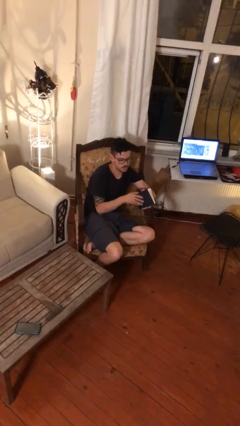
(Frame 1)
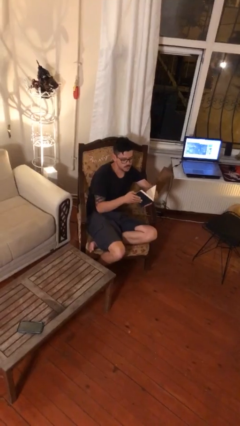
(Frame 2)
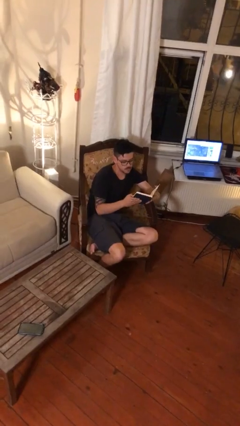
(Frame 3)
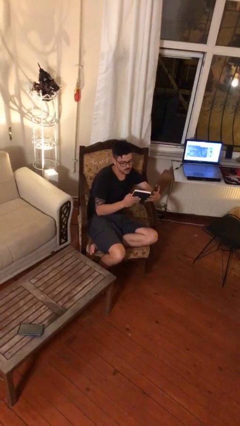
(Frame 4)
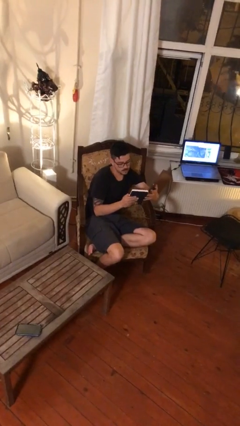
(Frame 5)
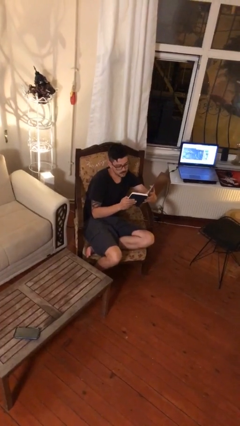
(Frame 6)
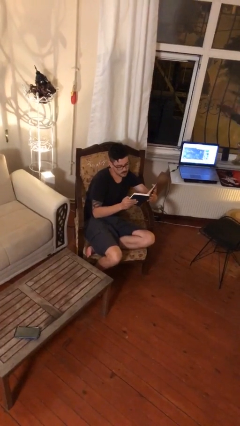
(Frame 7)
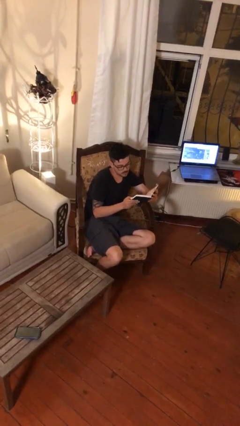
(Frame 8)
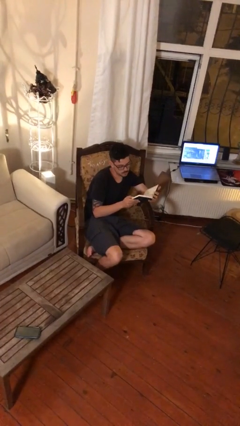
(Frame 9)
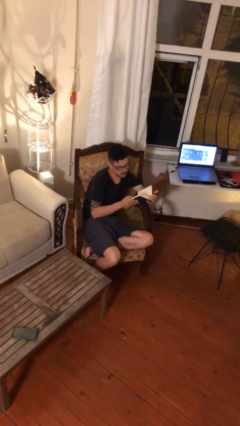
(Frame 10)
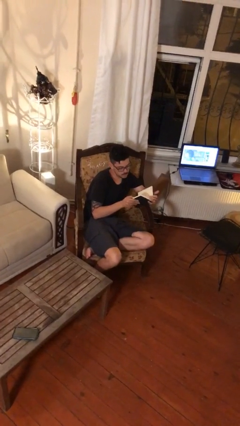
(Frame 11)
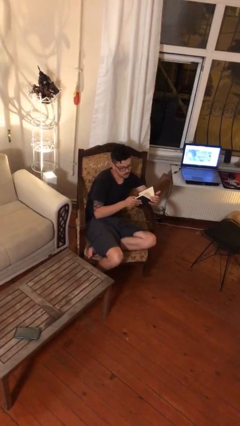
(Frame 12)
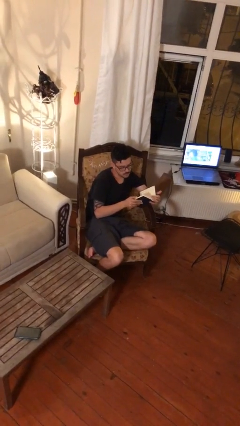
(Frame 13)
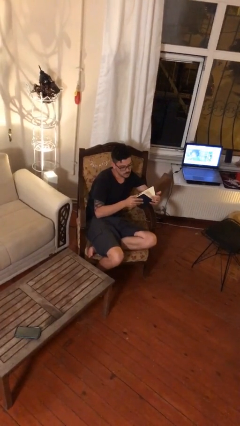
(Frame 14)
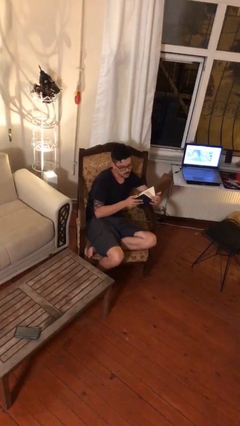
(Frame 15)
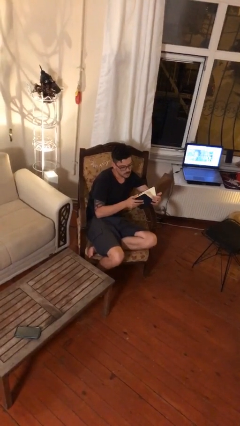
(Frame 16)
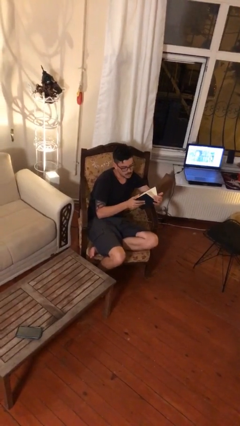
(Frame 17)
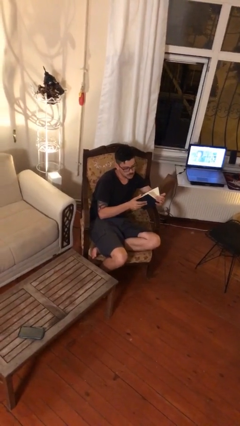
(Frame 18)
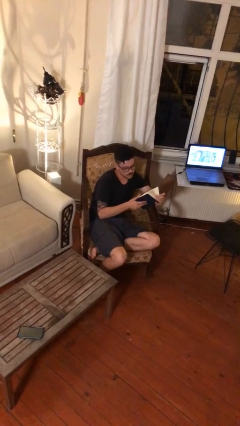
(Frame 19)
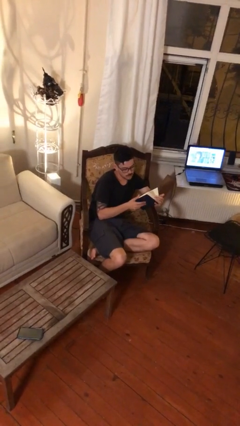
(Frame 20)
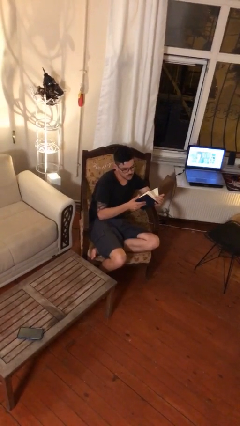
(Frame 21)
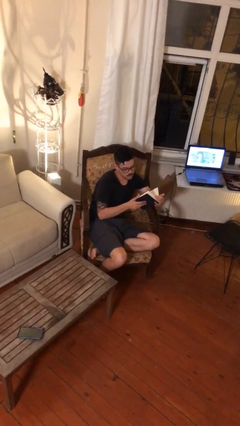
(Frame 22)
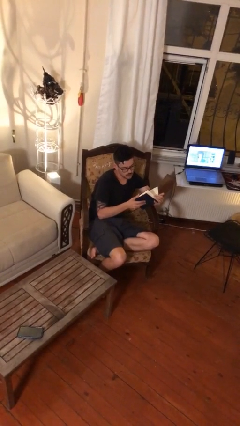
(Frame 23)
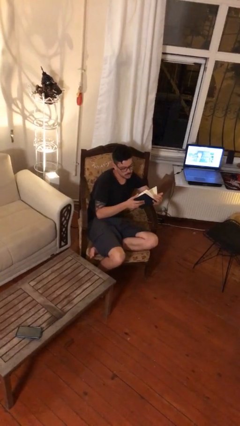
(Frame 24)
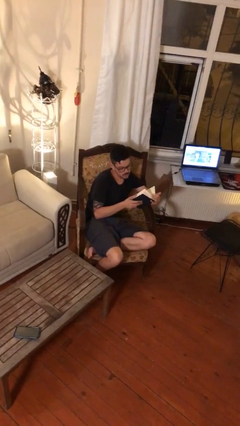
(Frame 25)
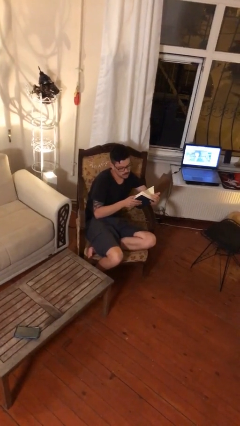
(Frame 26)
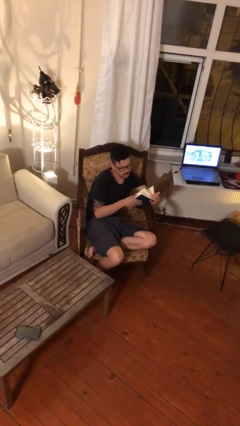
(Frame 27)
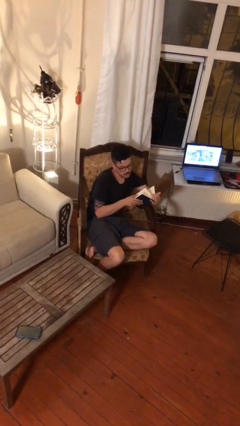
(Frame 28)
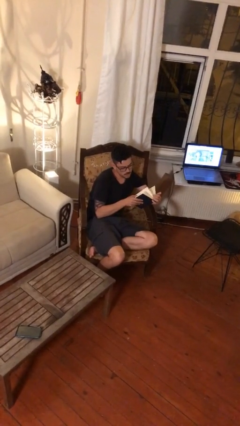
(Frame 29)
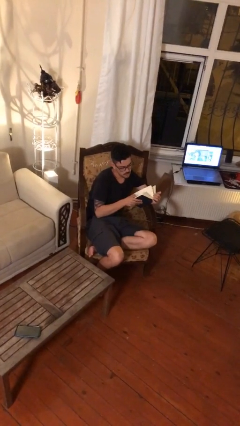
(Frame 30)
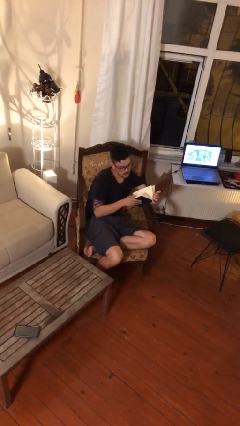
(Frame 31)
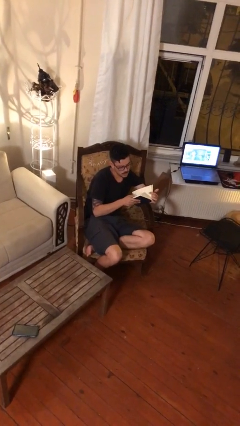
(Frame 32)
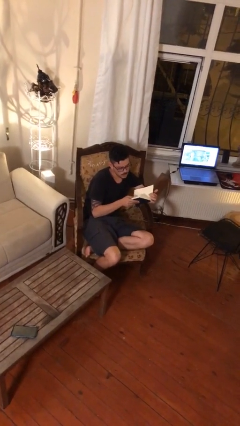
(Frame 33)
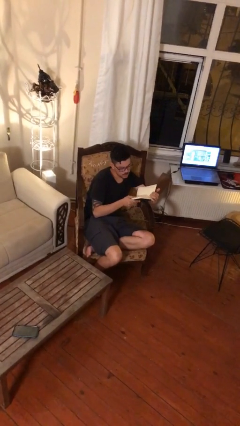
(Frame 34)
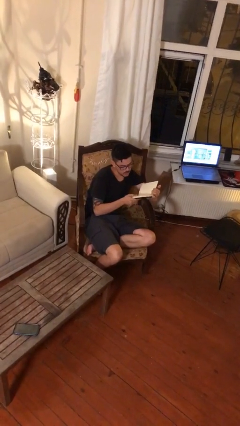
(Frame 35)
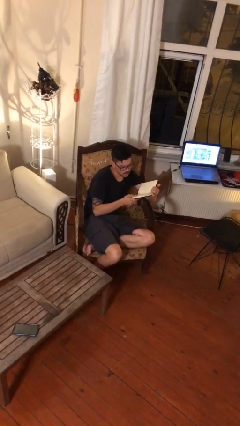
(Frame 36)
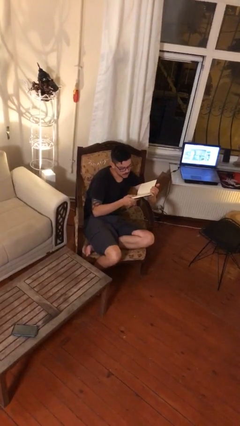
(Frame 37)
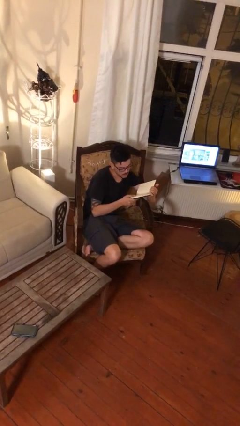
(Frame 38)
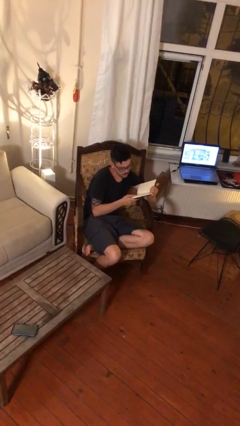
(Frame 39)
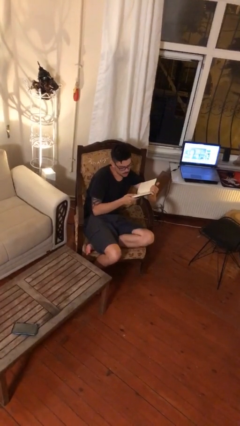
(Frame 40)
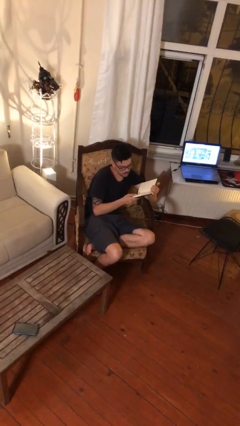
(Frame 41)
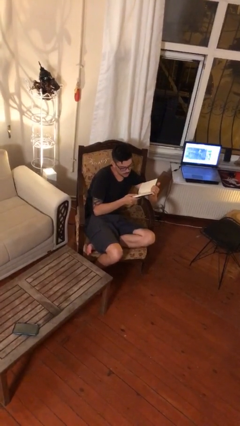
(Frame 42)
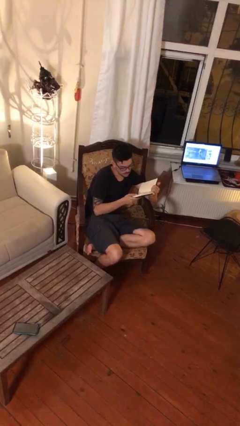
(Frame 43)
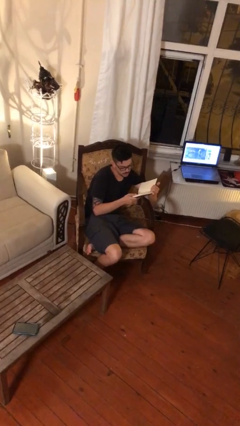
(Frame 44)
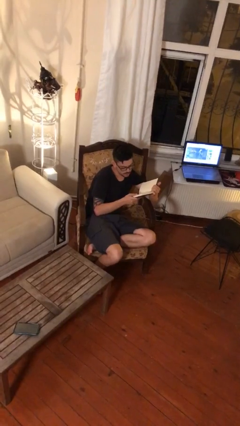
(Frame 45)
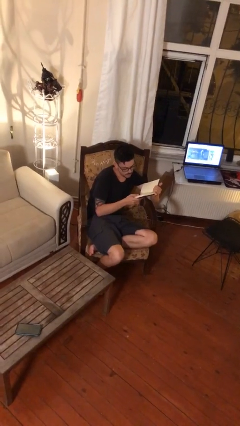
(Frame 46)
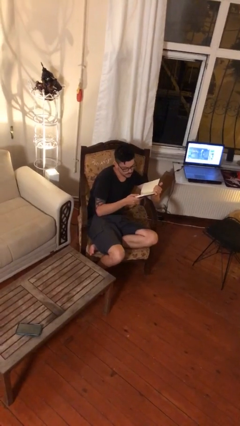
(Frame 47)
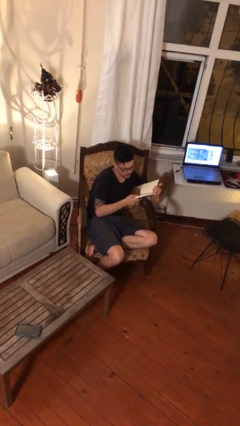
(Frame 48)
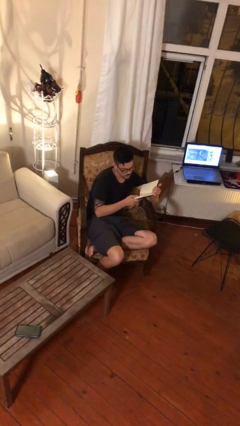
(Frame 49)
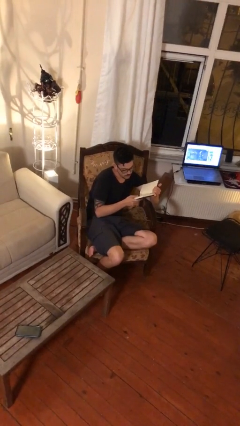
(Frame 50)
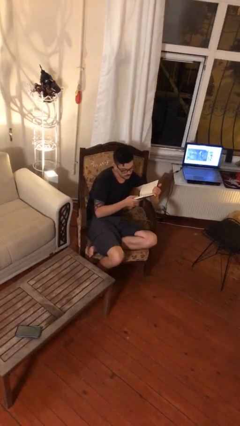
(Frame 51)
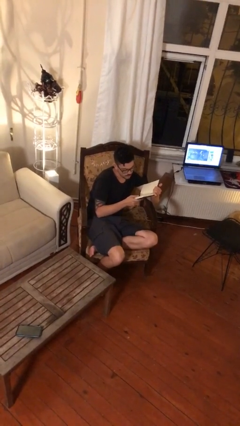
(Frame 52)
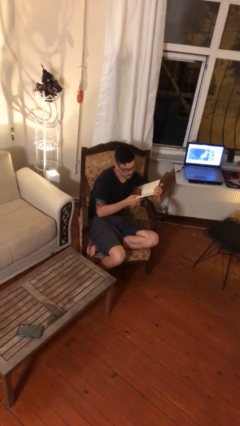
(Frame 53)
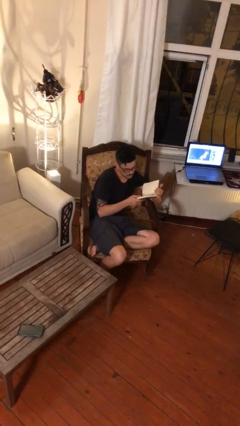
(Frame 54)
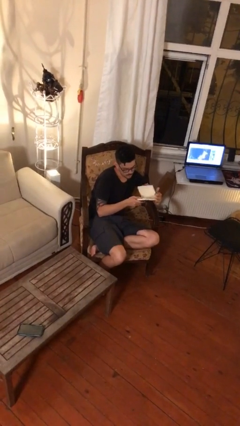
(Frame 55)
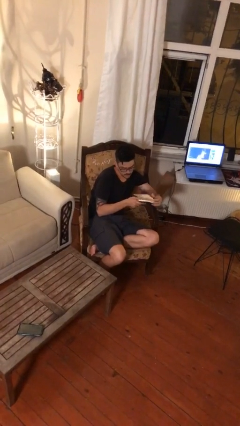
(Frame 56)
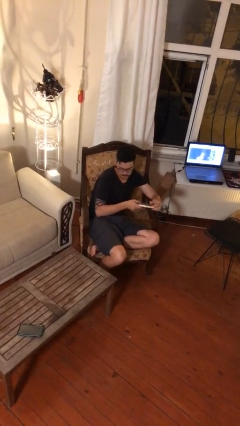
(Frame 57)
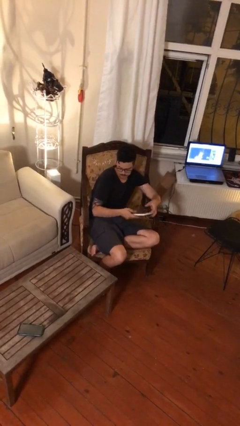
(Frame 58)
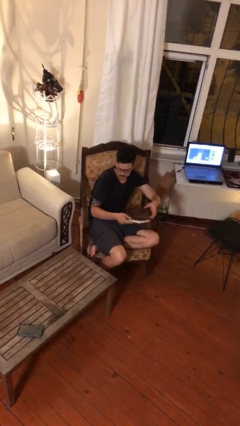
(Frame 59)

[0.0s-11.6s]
person reads document

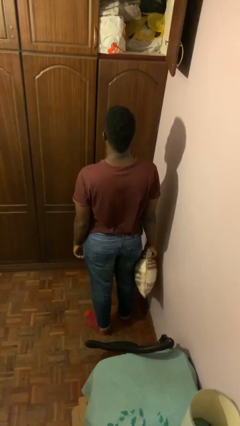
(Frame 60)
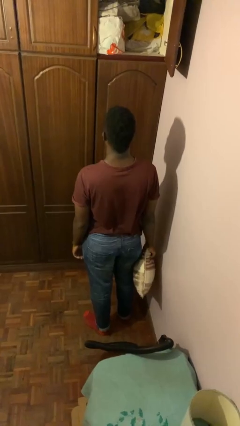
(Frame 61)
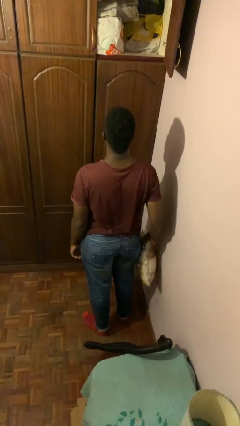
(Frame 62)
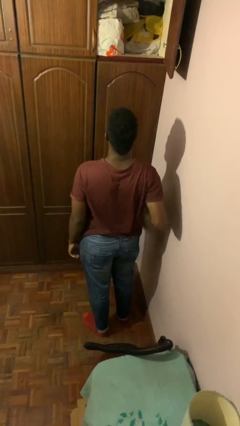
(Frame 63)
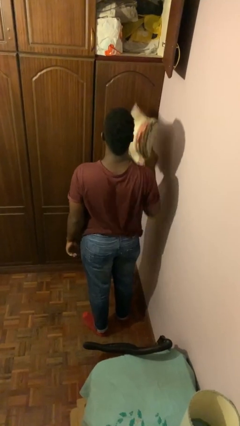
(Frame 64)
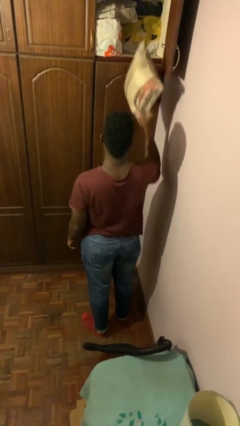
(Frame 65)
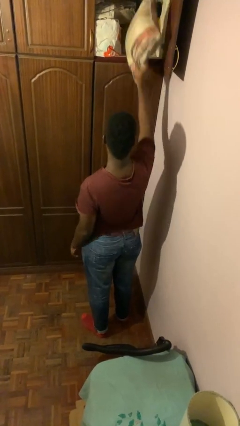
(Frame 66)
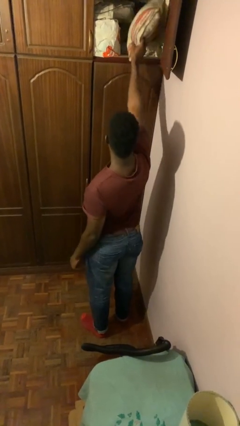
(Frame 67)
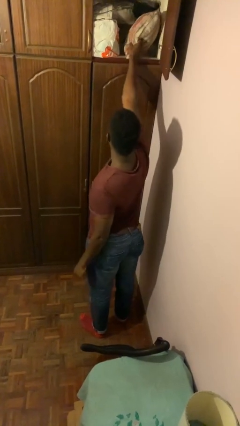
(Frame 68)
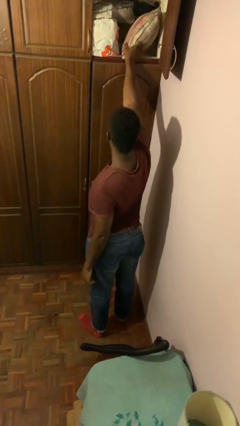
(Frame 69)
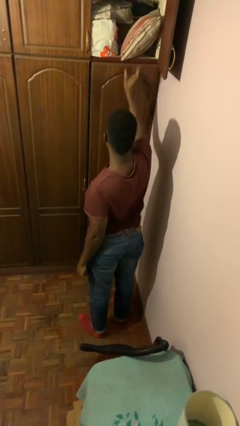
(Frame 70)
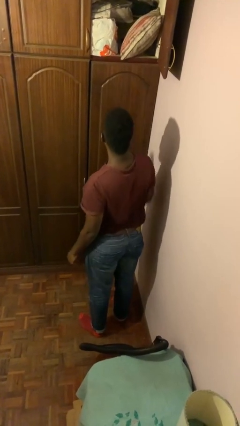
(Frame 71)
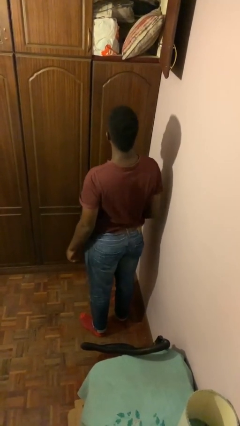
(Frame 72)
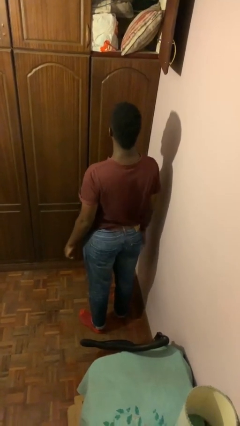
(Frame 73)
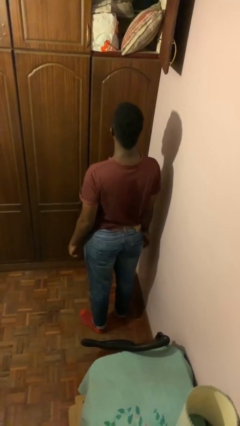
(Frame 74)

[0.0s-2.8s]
person puts down object on shelf

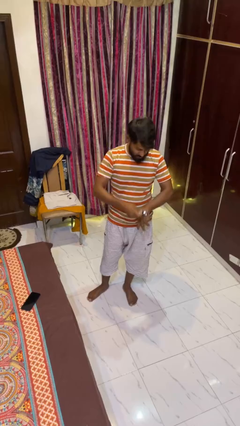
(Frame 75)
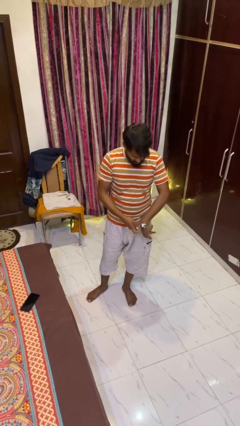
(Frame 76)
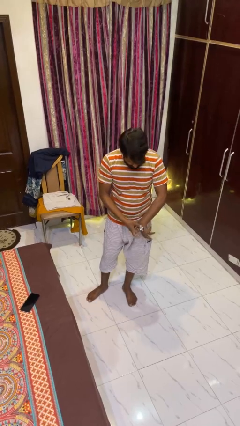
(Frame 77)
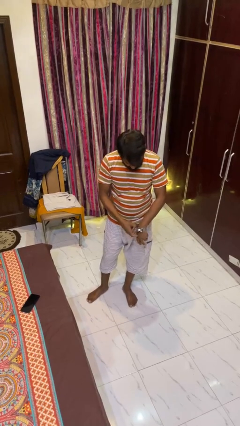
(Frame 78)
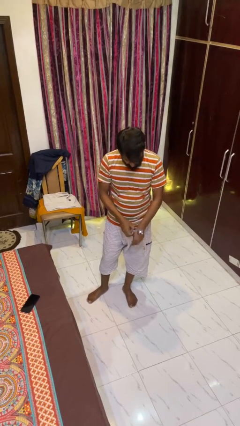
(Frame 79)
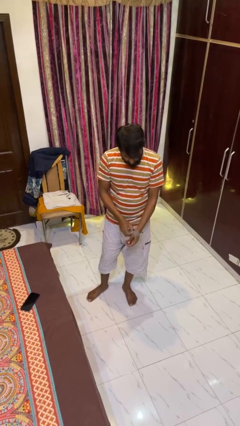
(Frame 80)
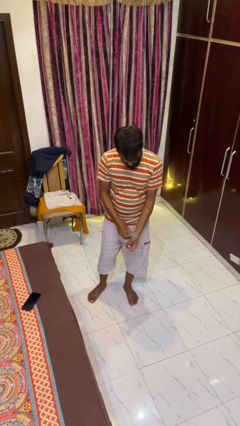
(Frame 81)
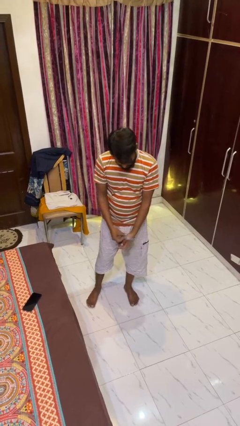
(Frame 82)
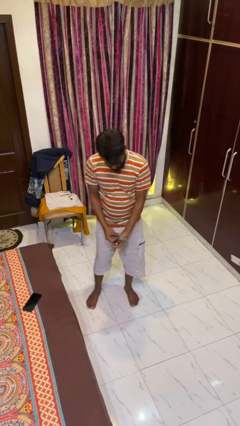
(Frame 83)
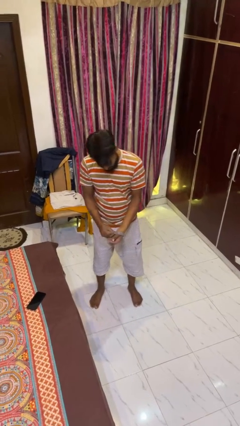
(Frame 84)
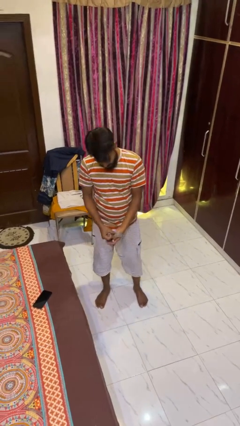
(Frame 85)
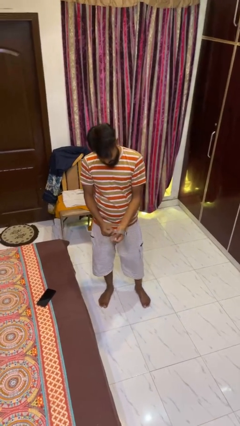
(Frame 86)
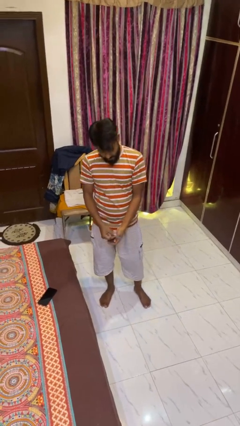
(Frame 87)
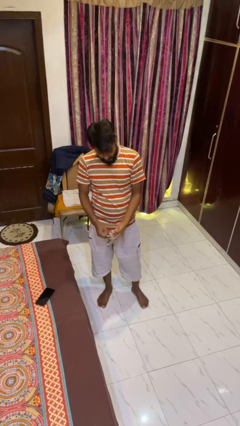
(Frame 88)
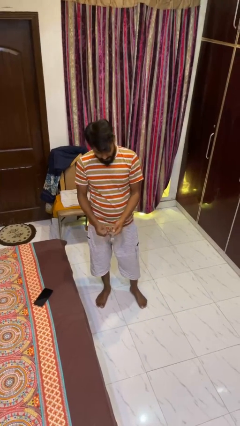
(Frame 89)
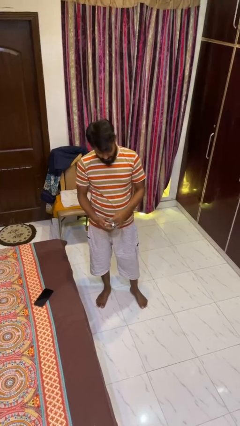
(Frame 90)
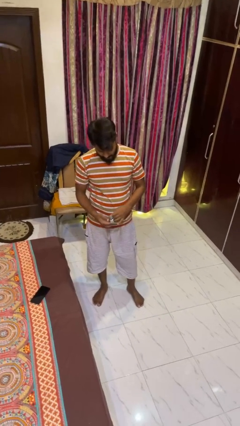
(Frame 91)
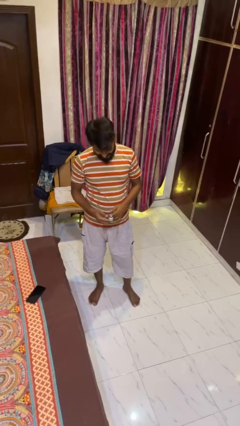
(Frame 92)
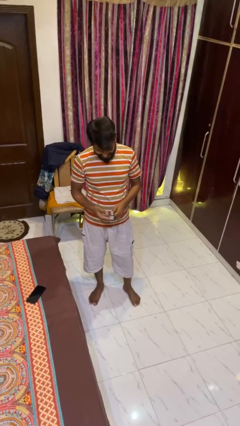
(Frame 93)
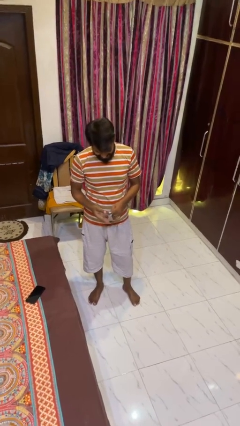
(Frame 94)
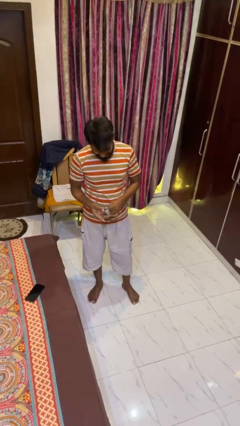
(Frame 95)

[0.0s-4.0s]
person takes off wristwatch
